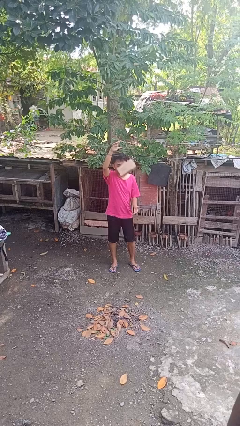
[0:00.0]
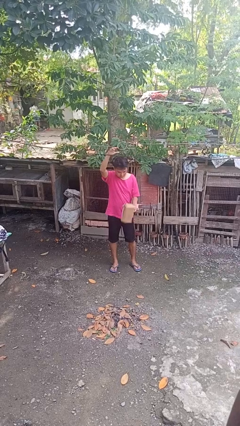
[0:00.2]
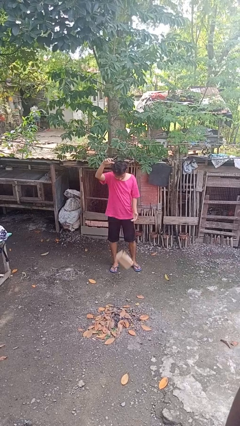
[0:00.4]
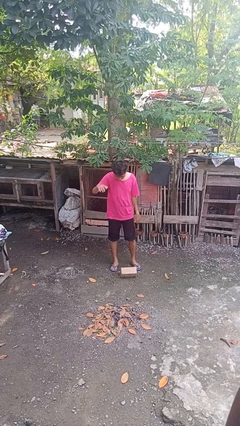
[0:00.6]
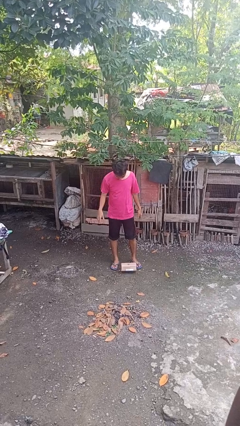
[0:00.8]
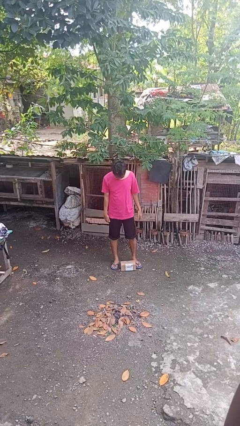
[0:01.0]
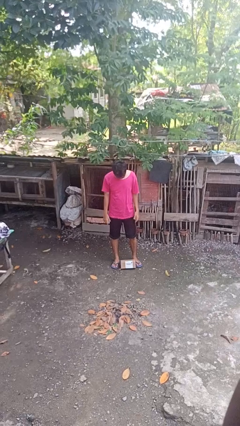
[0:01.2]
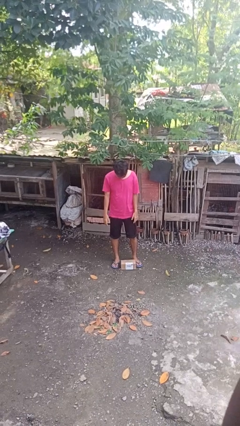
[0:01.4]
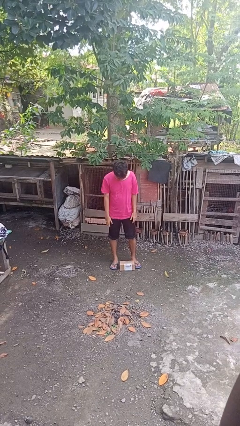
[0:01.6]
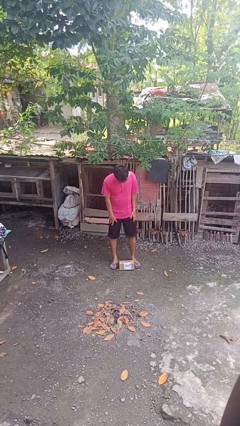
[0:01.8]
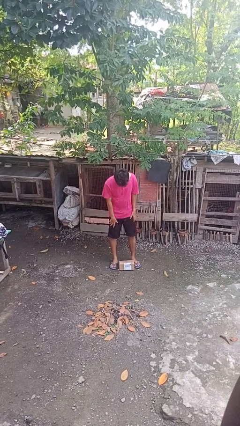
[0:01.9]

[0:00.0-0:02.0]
person drops object

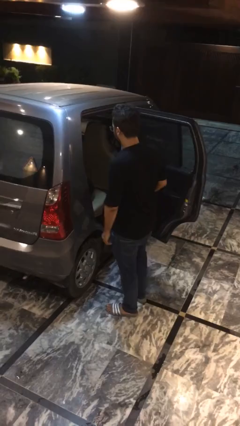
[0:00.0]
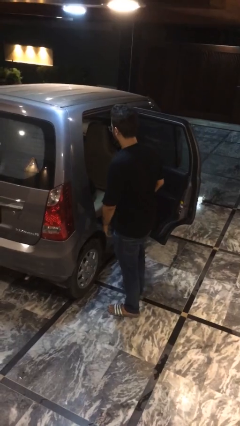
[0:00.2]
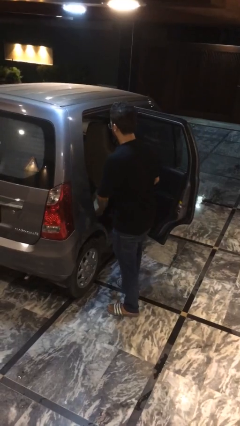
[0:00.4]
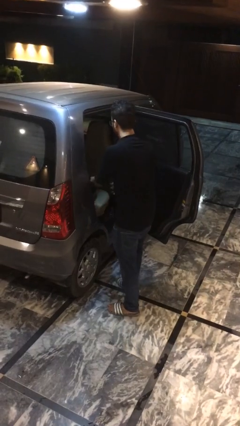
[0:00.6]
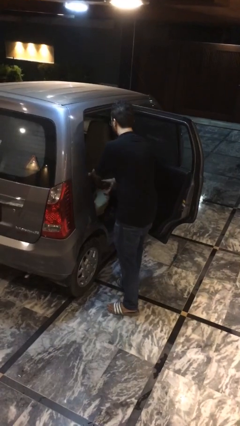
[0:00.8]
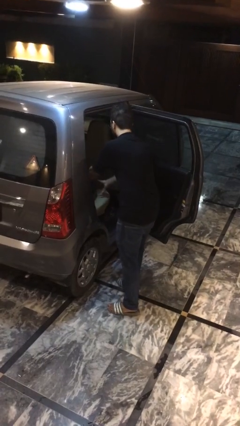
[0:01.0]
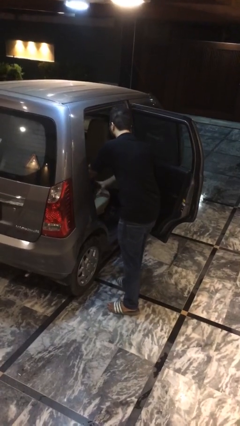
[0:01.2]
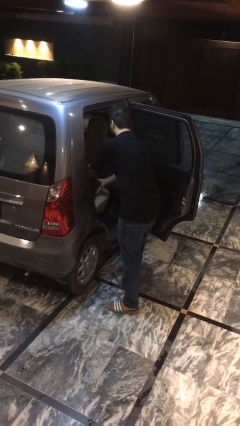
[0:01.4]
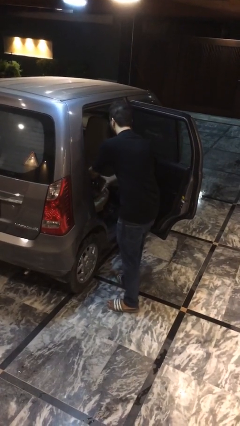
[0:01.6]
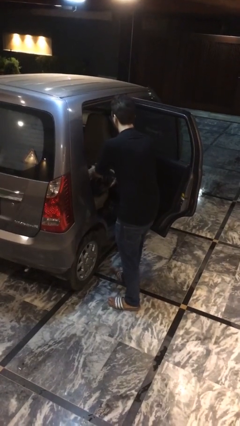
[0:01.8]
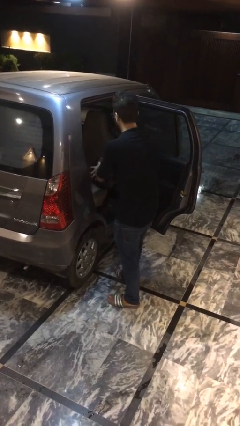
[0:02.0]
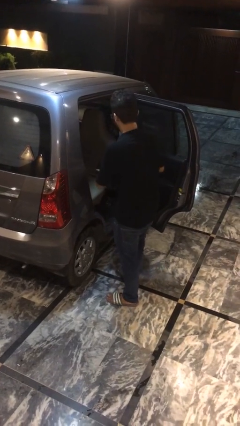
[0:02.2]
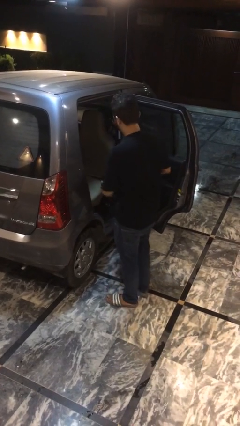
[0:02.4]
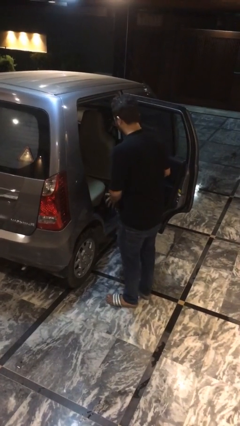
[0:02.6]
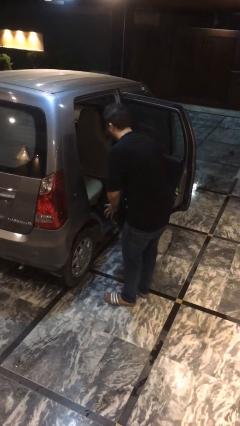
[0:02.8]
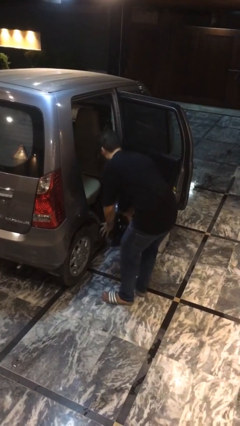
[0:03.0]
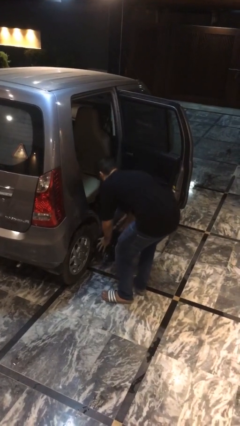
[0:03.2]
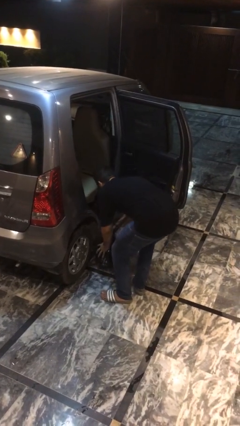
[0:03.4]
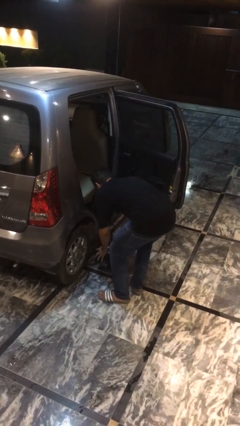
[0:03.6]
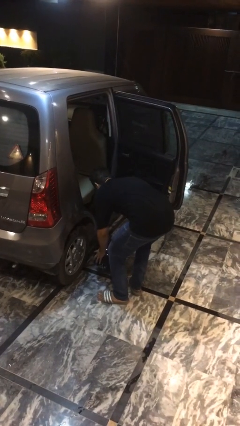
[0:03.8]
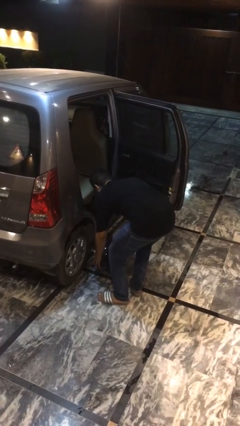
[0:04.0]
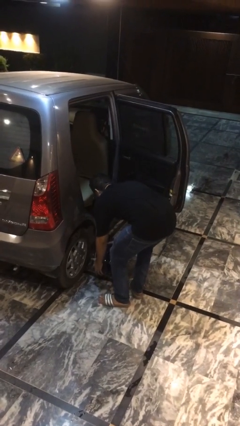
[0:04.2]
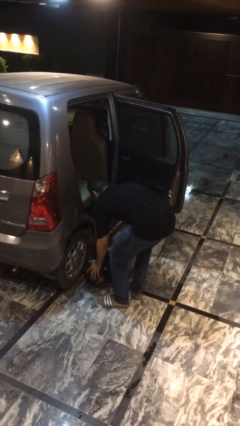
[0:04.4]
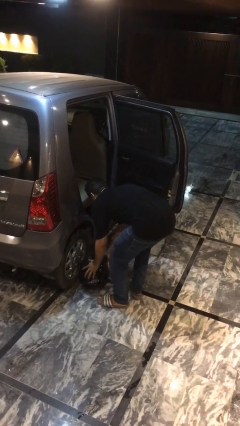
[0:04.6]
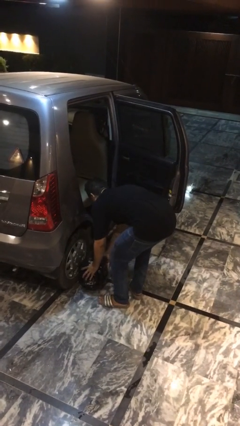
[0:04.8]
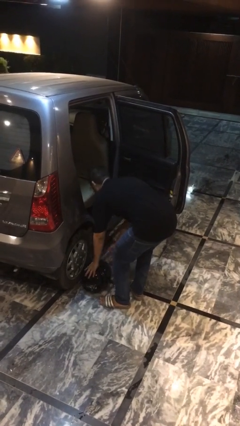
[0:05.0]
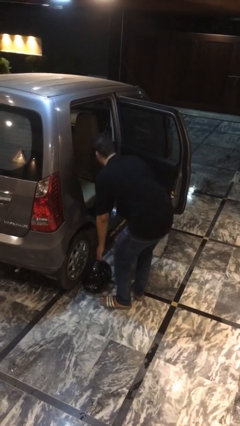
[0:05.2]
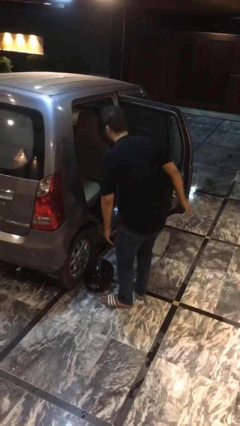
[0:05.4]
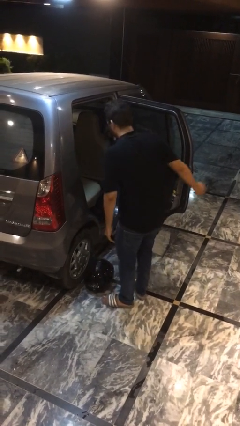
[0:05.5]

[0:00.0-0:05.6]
person unloads car

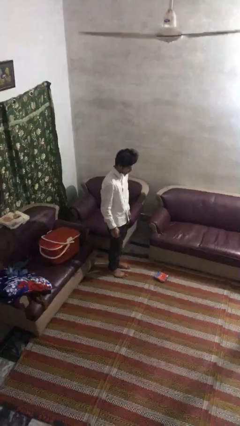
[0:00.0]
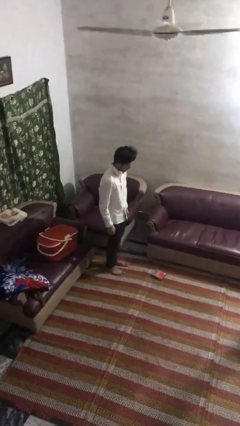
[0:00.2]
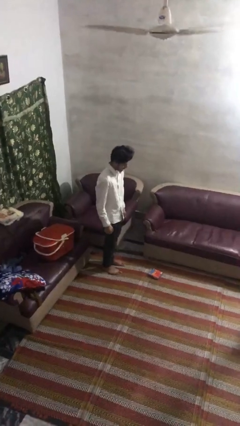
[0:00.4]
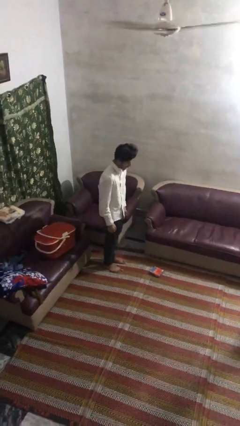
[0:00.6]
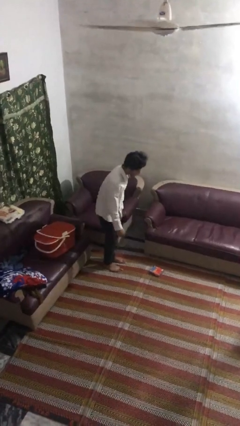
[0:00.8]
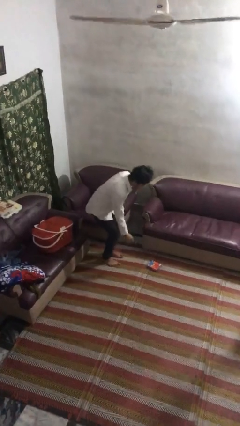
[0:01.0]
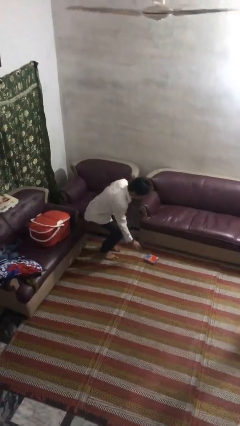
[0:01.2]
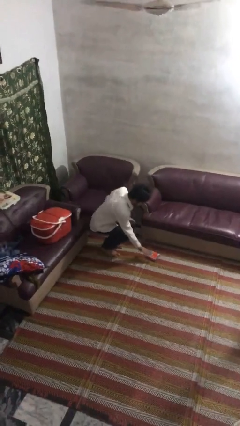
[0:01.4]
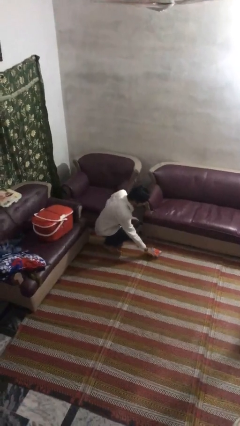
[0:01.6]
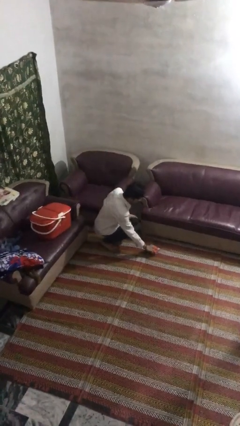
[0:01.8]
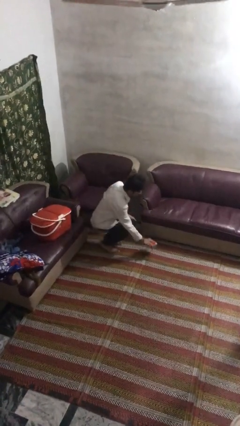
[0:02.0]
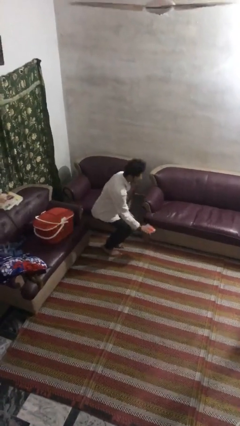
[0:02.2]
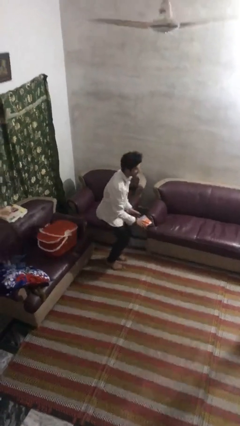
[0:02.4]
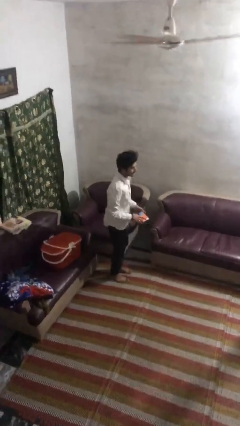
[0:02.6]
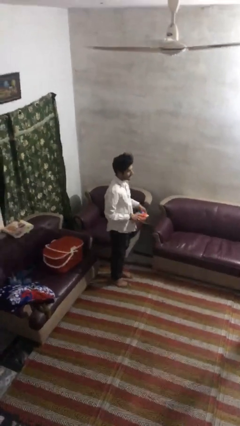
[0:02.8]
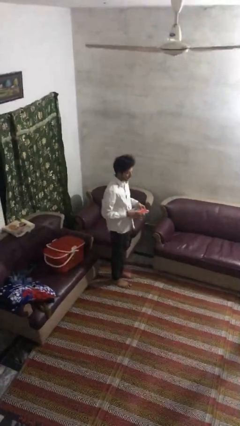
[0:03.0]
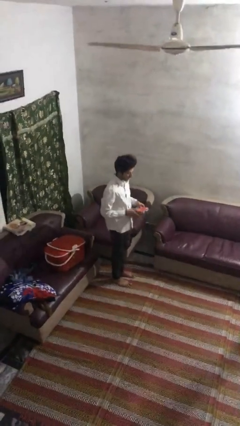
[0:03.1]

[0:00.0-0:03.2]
person picks up object from floor

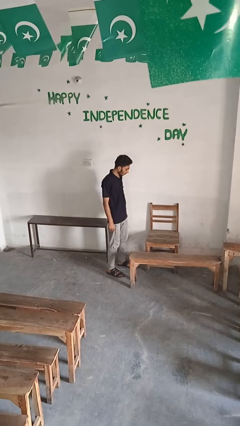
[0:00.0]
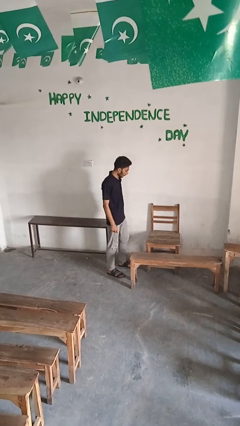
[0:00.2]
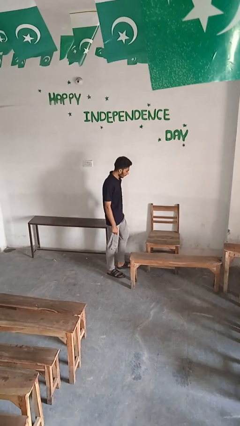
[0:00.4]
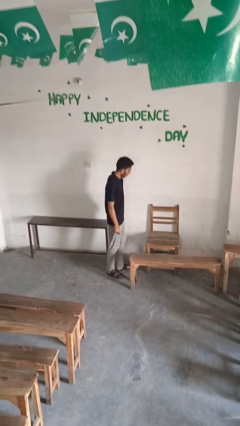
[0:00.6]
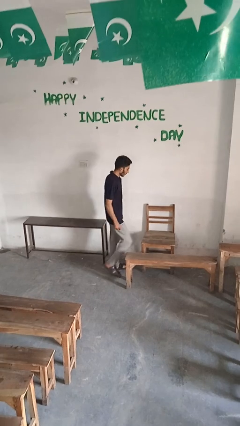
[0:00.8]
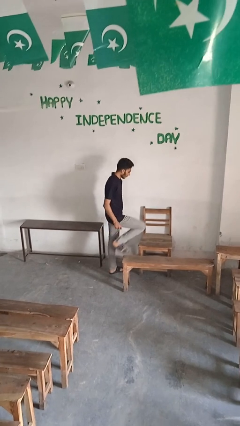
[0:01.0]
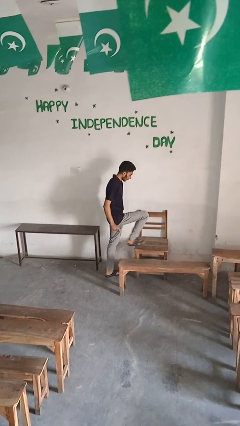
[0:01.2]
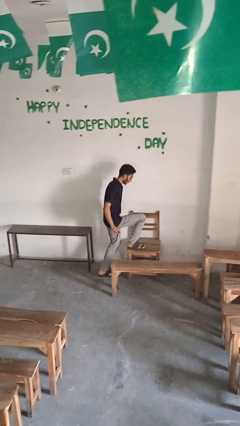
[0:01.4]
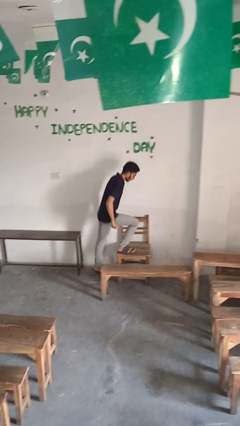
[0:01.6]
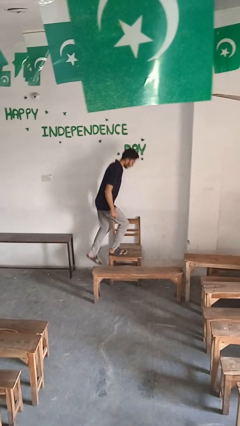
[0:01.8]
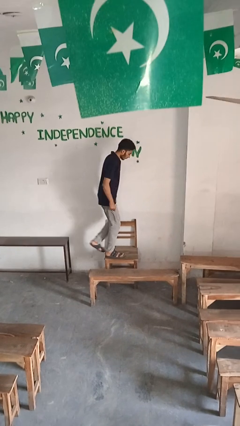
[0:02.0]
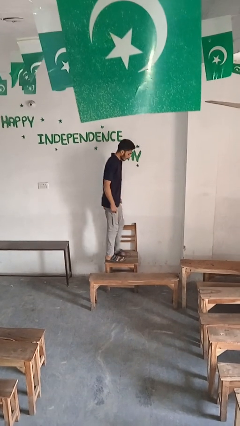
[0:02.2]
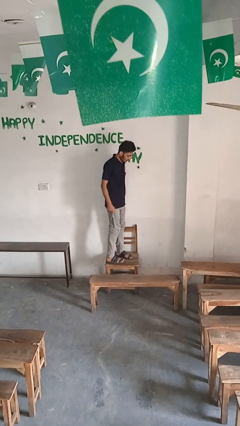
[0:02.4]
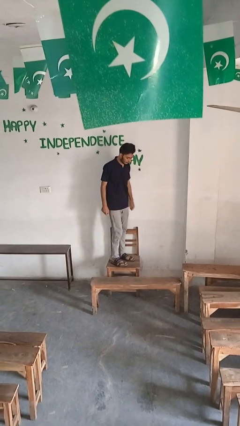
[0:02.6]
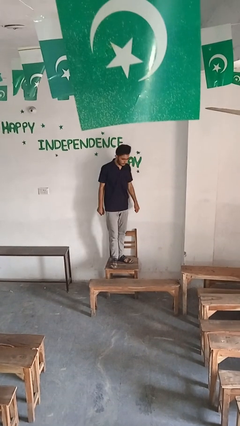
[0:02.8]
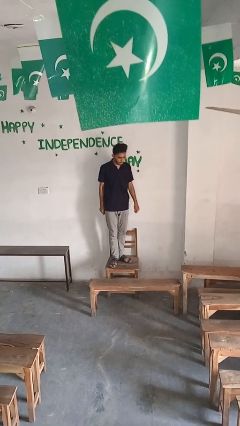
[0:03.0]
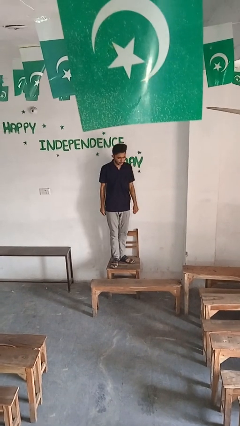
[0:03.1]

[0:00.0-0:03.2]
person climbs on chair

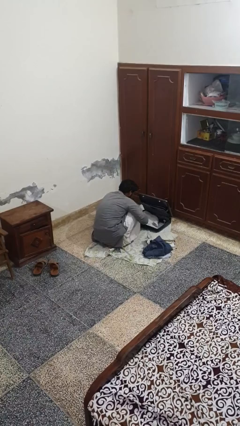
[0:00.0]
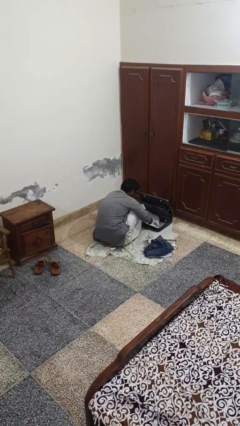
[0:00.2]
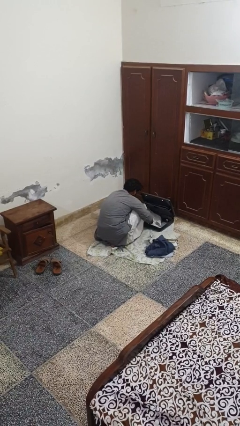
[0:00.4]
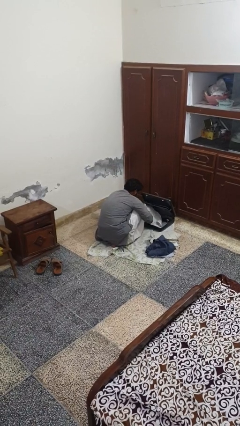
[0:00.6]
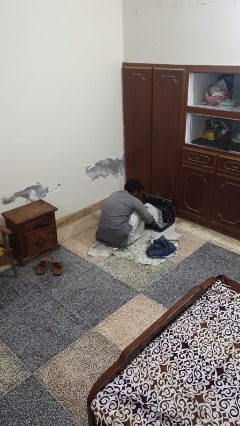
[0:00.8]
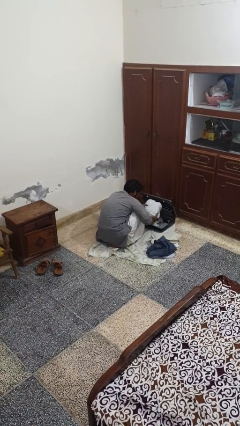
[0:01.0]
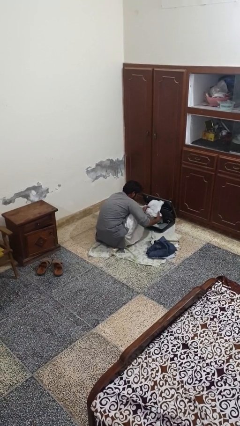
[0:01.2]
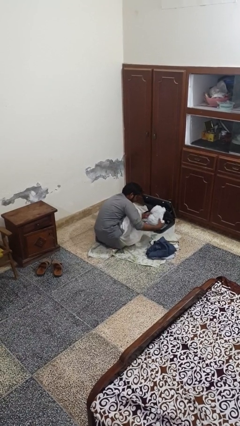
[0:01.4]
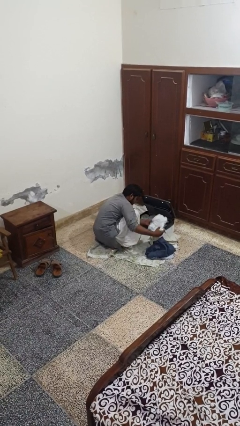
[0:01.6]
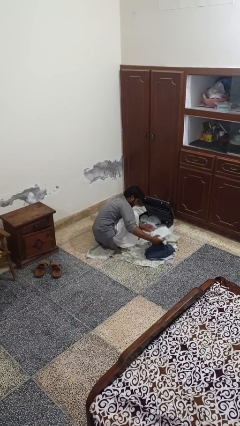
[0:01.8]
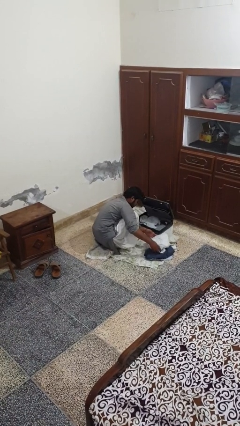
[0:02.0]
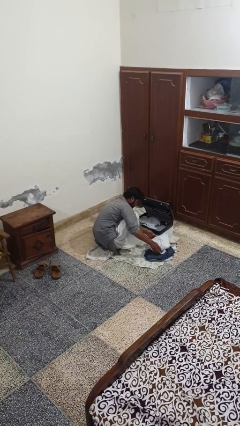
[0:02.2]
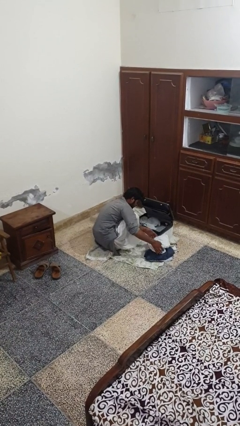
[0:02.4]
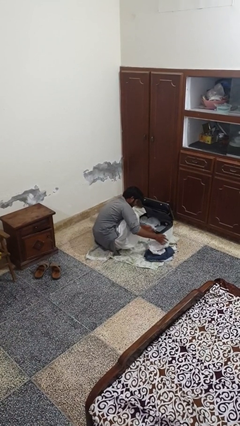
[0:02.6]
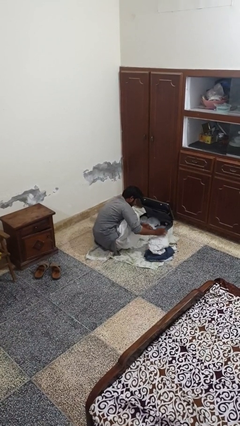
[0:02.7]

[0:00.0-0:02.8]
person unloads clothes from suitcase

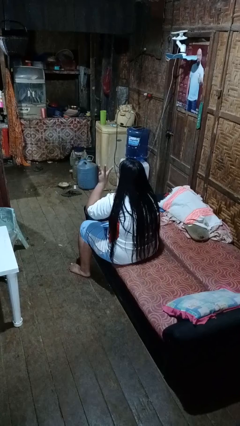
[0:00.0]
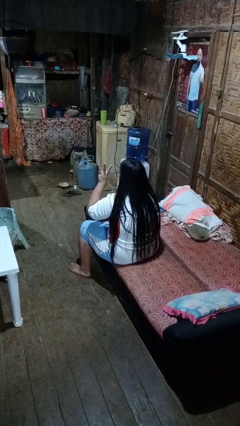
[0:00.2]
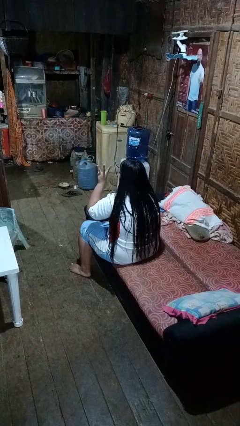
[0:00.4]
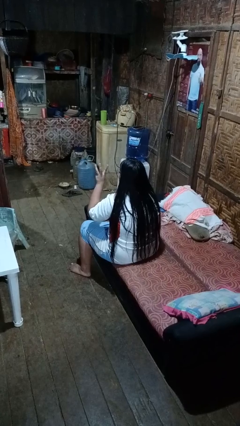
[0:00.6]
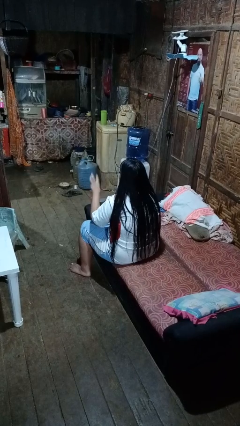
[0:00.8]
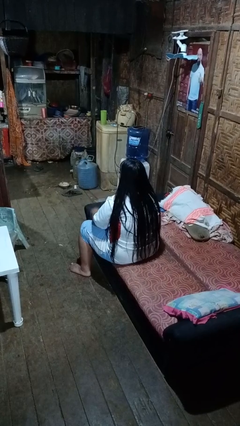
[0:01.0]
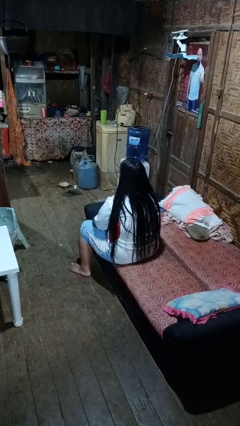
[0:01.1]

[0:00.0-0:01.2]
person gestures number three
